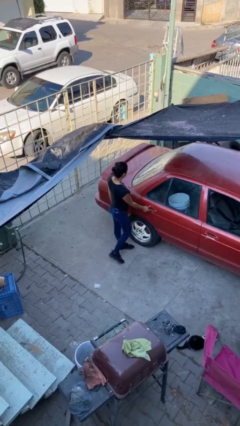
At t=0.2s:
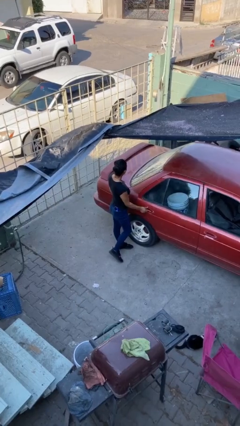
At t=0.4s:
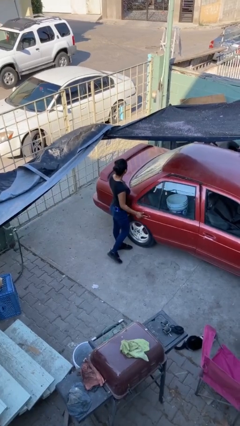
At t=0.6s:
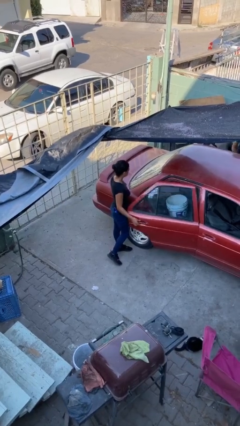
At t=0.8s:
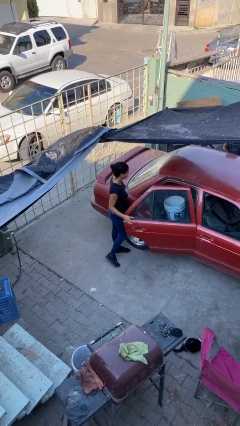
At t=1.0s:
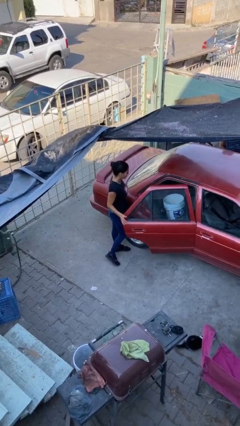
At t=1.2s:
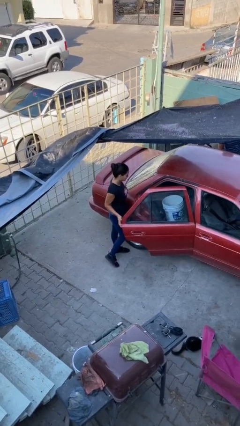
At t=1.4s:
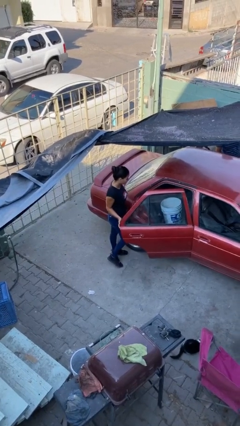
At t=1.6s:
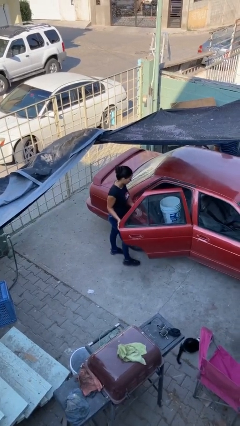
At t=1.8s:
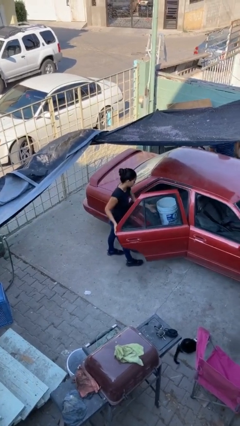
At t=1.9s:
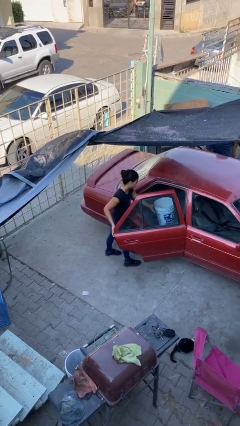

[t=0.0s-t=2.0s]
person opens car door

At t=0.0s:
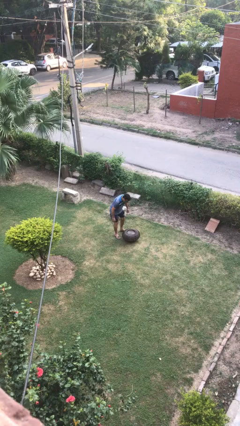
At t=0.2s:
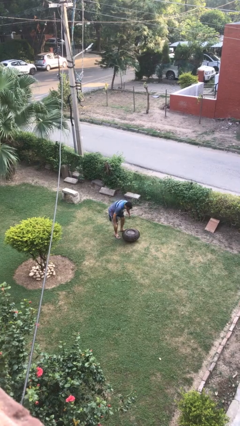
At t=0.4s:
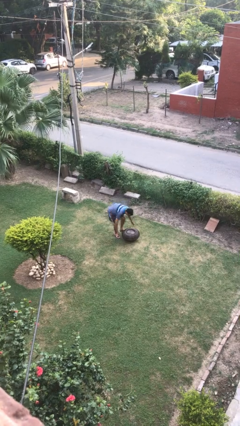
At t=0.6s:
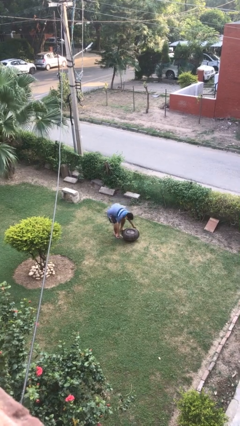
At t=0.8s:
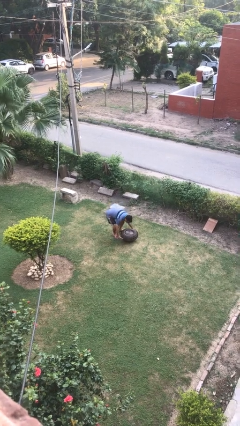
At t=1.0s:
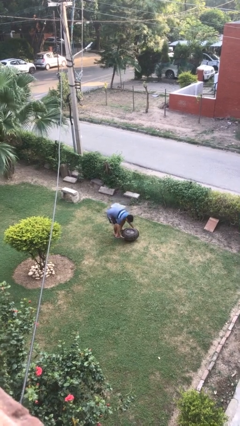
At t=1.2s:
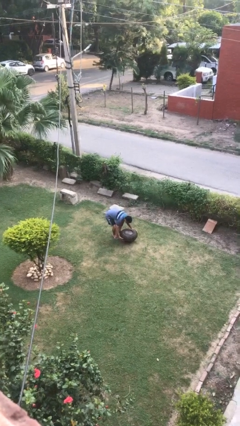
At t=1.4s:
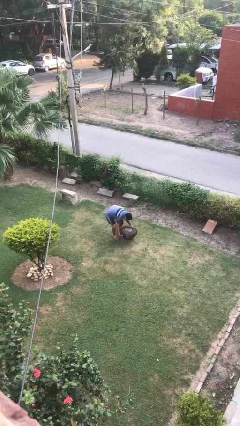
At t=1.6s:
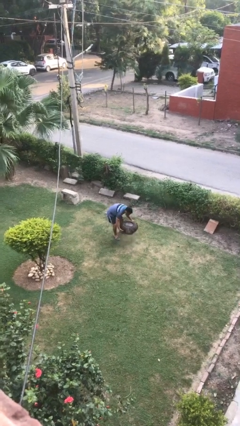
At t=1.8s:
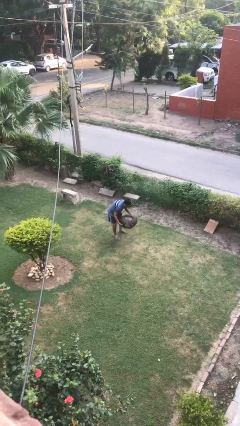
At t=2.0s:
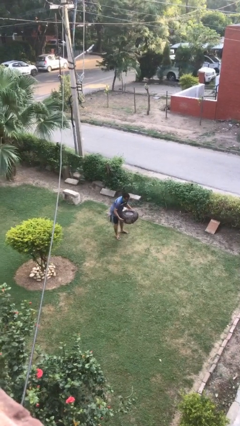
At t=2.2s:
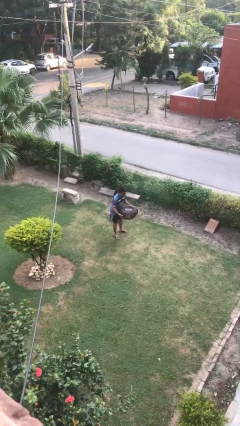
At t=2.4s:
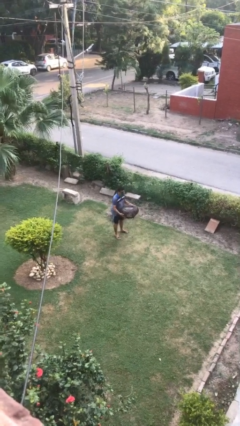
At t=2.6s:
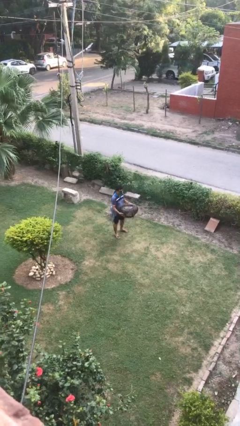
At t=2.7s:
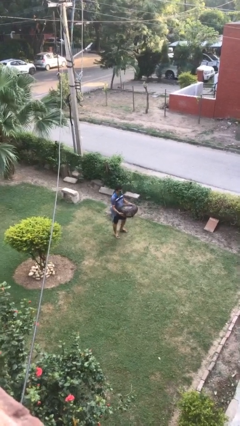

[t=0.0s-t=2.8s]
person picks up object from floor

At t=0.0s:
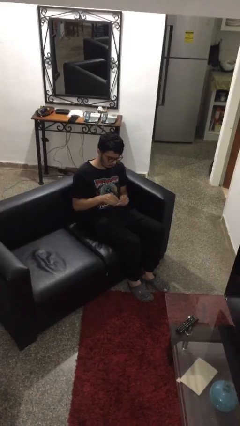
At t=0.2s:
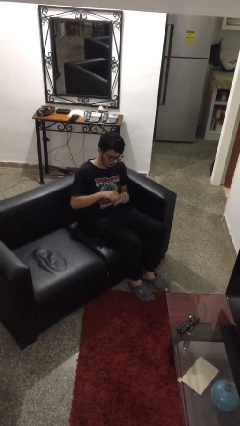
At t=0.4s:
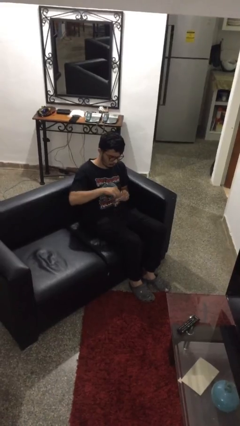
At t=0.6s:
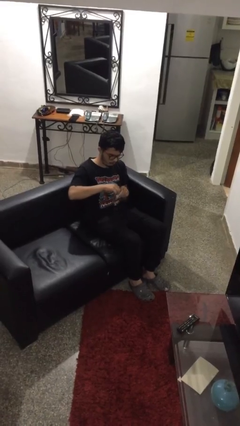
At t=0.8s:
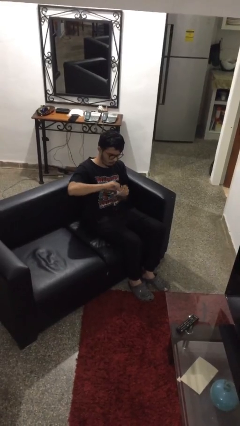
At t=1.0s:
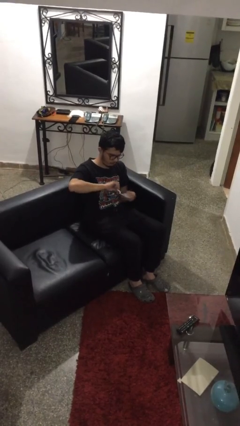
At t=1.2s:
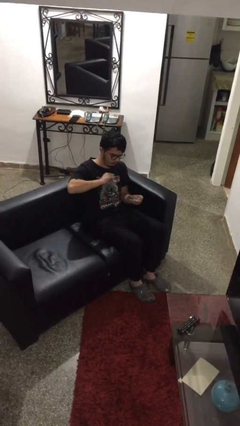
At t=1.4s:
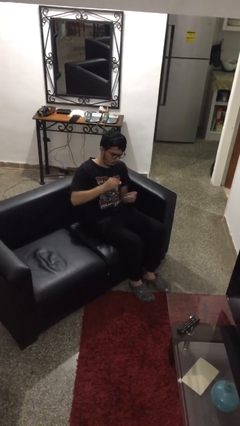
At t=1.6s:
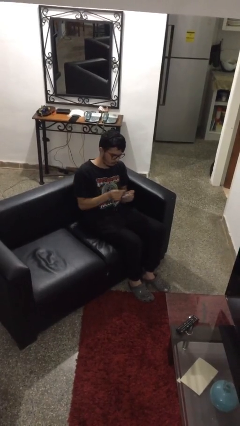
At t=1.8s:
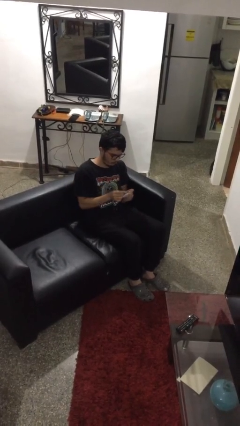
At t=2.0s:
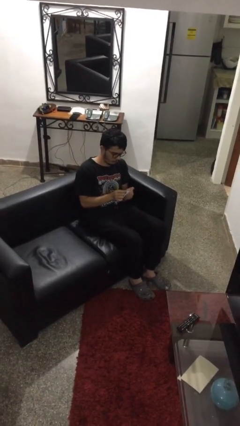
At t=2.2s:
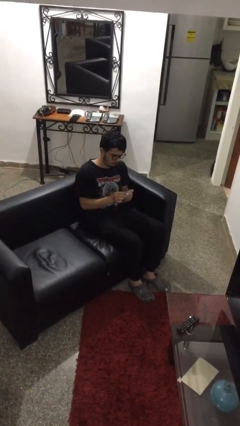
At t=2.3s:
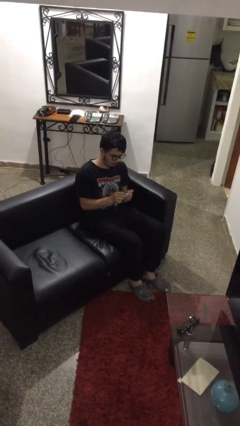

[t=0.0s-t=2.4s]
person tears paper

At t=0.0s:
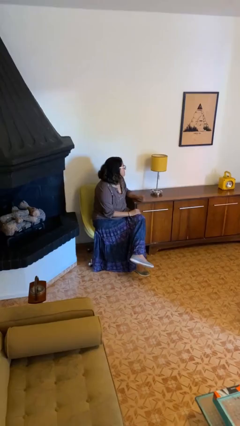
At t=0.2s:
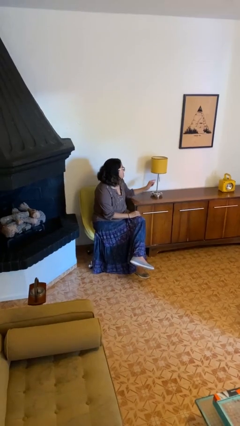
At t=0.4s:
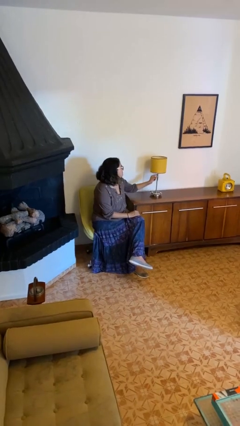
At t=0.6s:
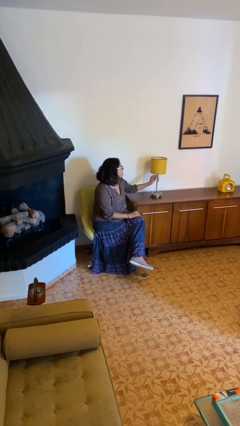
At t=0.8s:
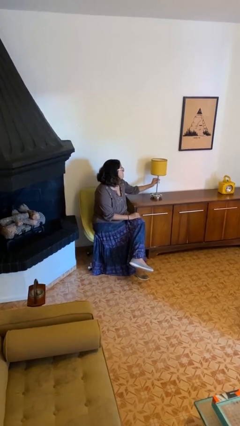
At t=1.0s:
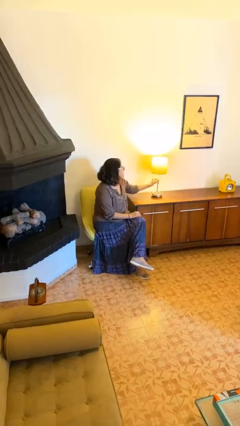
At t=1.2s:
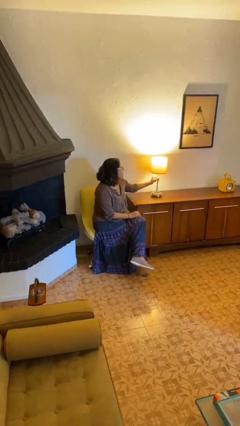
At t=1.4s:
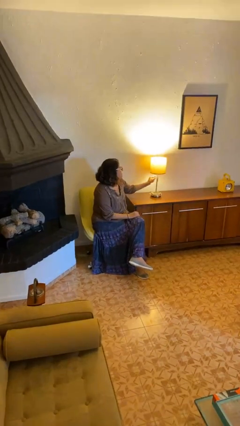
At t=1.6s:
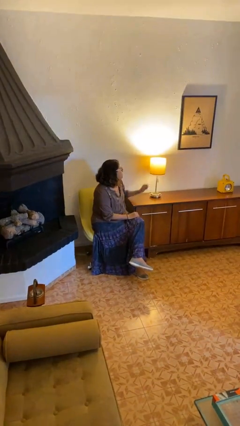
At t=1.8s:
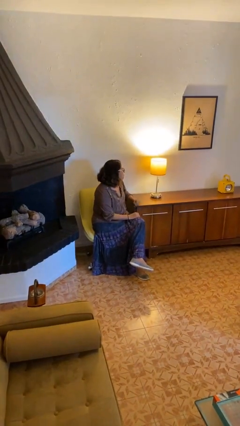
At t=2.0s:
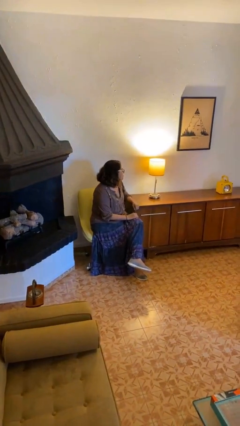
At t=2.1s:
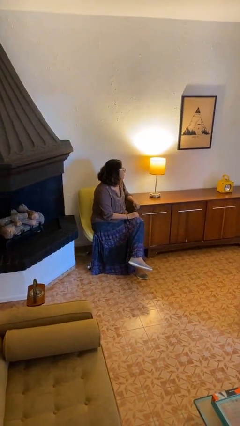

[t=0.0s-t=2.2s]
person turns on lamp

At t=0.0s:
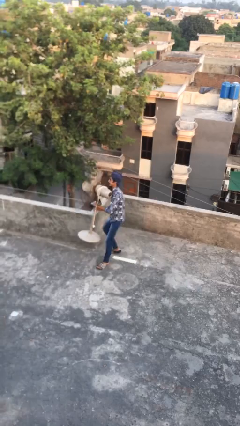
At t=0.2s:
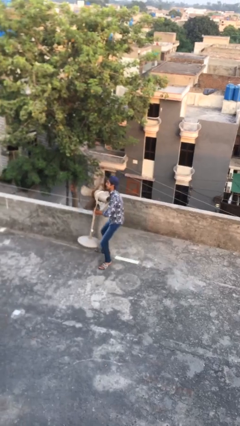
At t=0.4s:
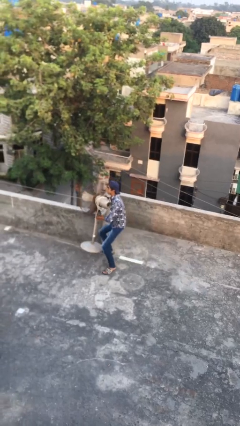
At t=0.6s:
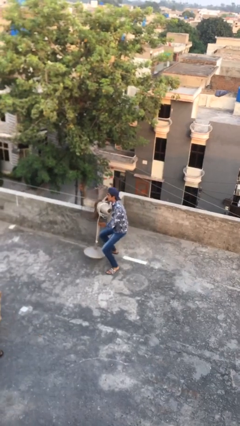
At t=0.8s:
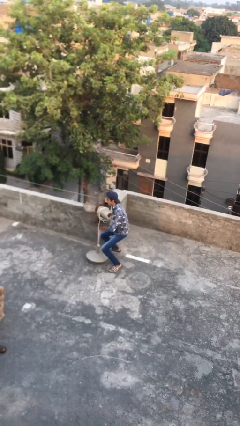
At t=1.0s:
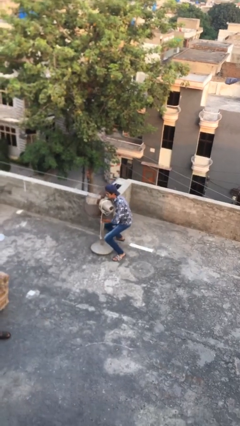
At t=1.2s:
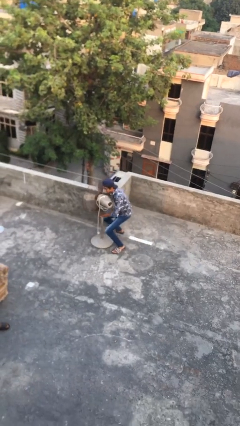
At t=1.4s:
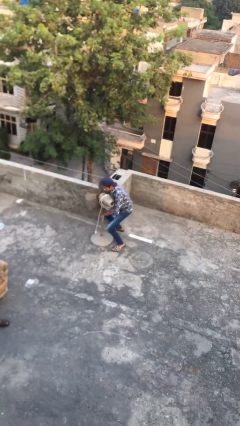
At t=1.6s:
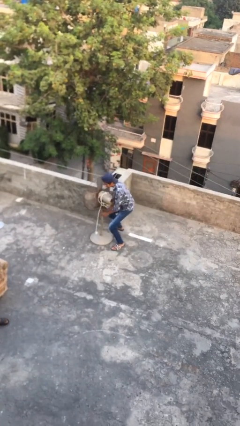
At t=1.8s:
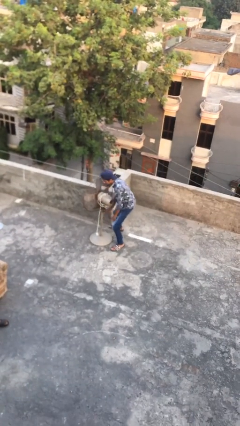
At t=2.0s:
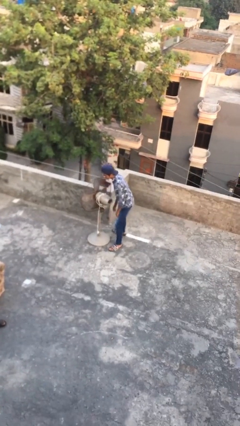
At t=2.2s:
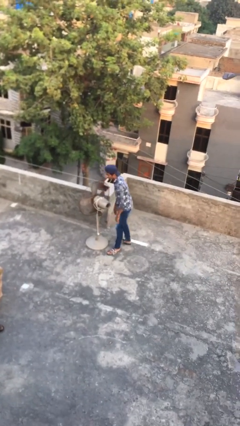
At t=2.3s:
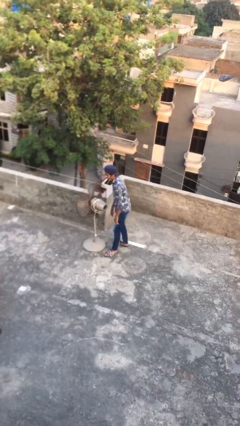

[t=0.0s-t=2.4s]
person puts down object on floor

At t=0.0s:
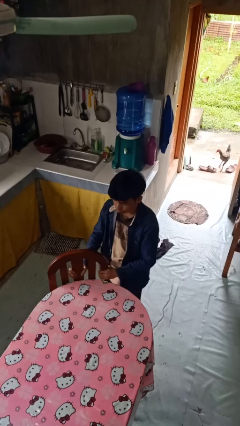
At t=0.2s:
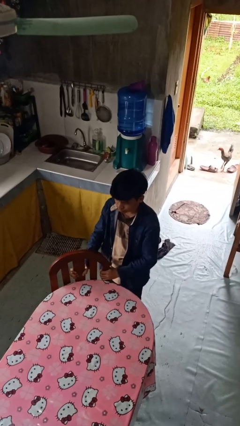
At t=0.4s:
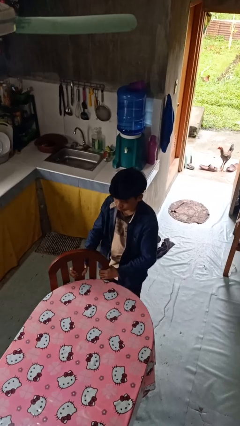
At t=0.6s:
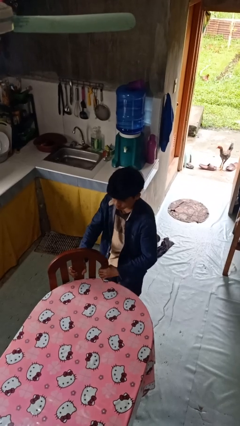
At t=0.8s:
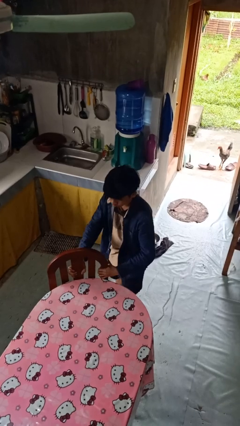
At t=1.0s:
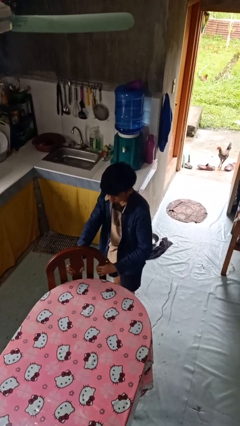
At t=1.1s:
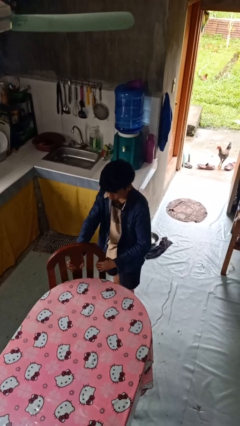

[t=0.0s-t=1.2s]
person pulls out chair

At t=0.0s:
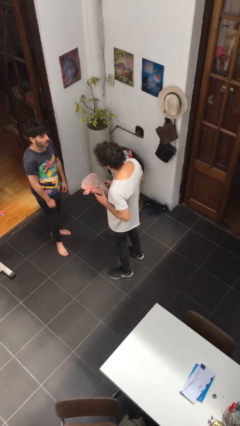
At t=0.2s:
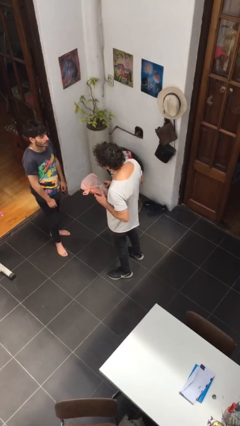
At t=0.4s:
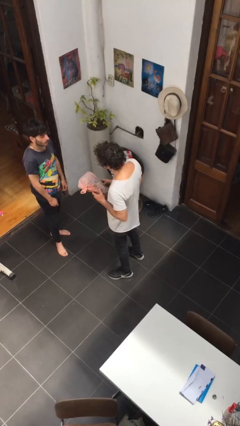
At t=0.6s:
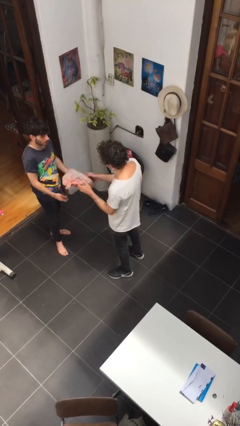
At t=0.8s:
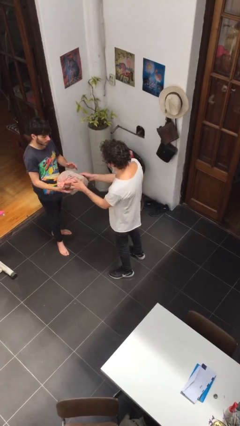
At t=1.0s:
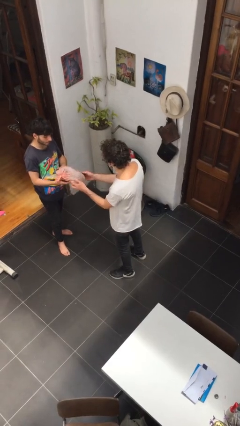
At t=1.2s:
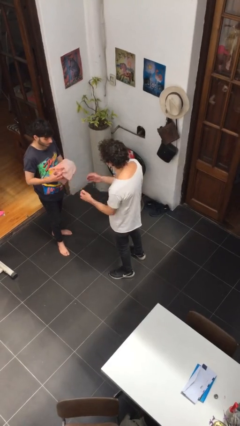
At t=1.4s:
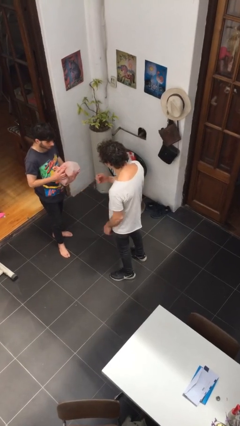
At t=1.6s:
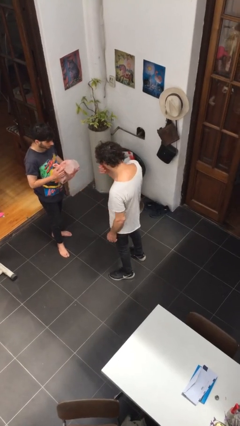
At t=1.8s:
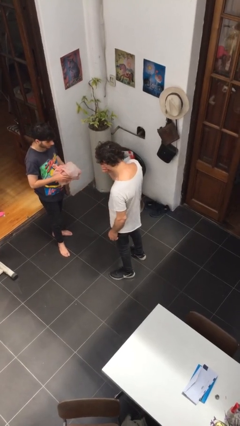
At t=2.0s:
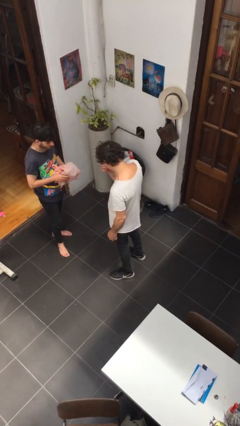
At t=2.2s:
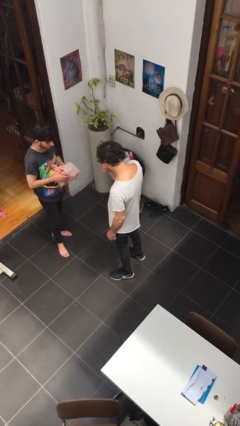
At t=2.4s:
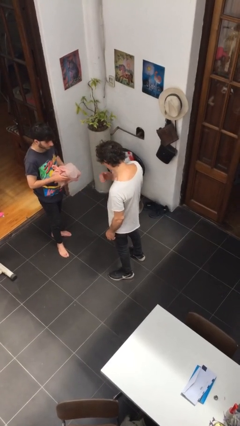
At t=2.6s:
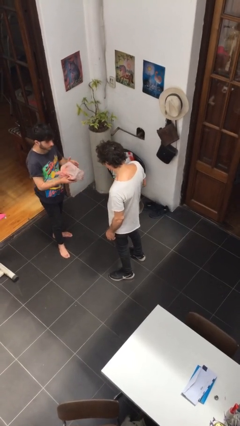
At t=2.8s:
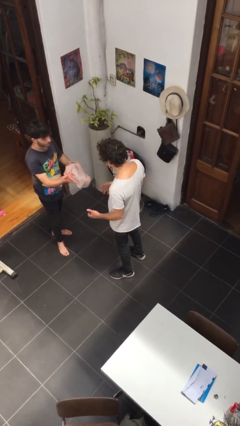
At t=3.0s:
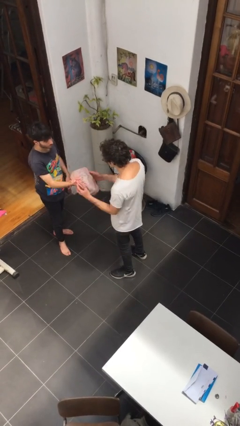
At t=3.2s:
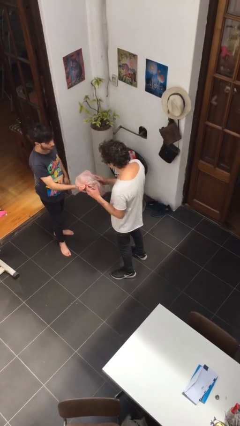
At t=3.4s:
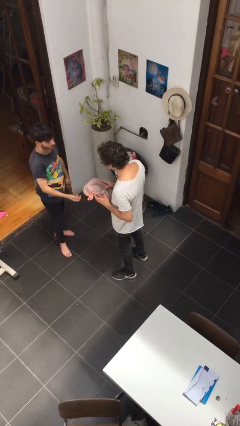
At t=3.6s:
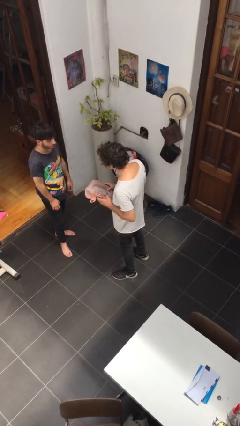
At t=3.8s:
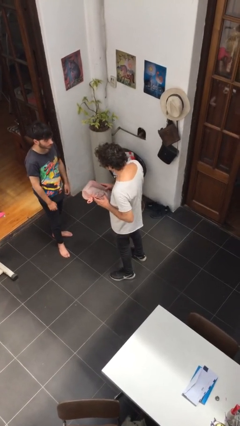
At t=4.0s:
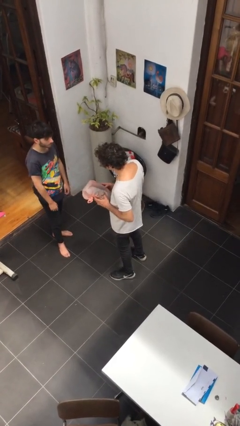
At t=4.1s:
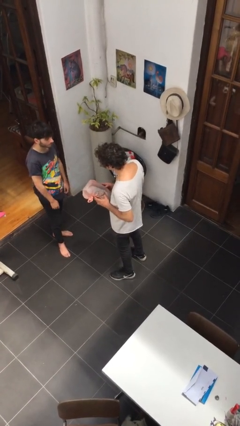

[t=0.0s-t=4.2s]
person transfers object to person
